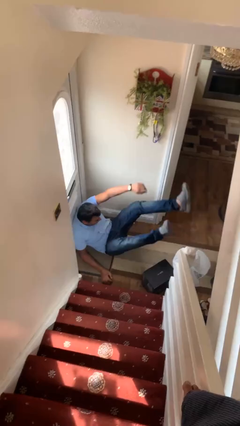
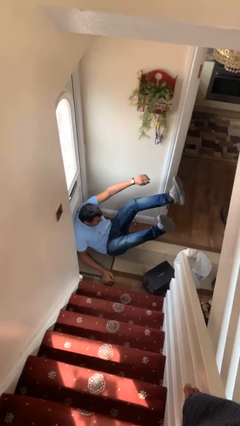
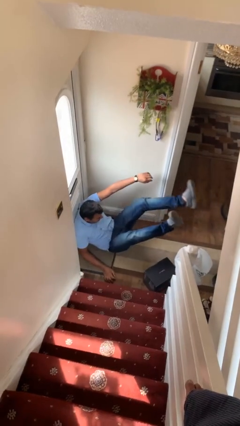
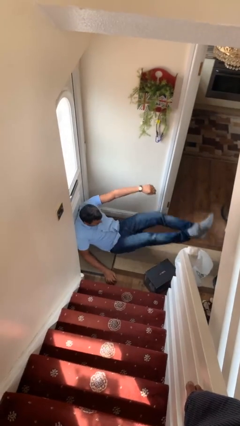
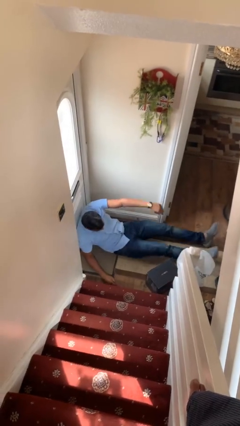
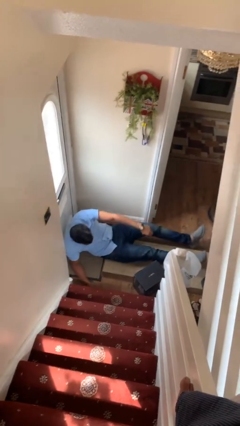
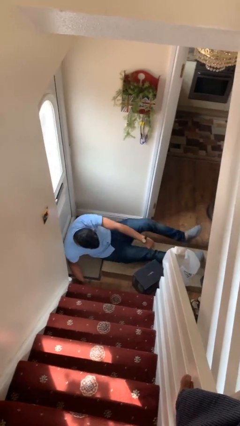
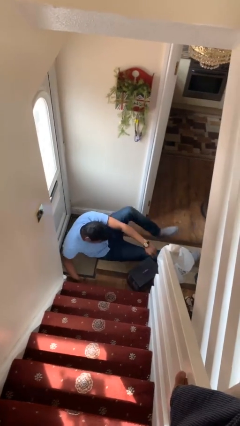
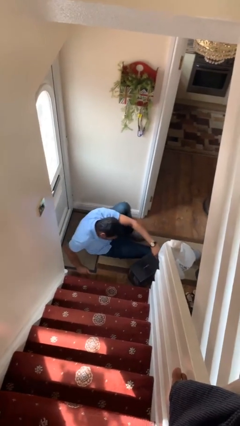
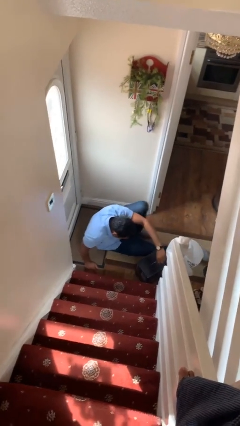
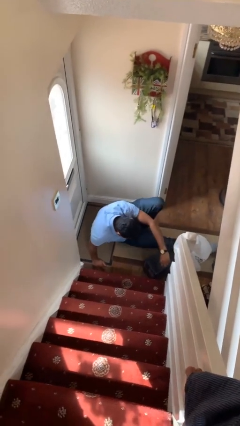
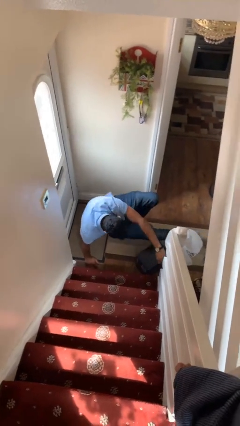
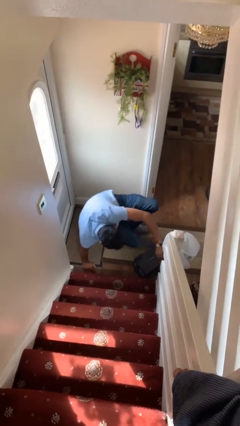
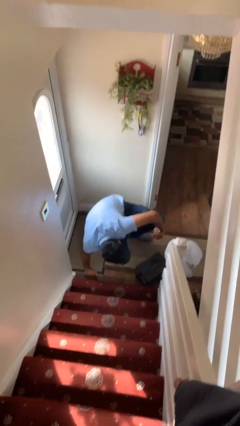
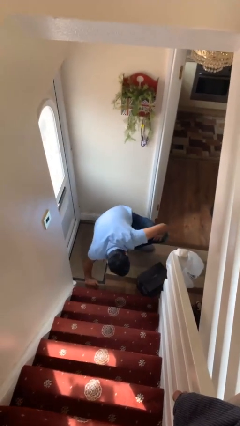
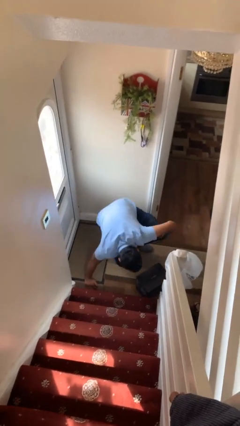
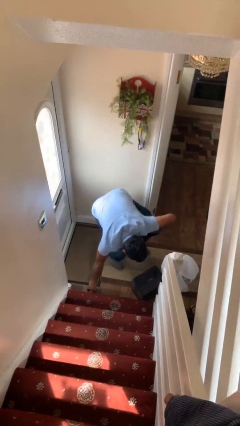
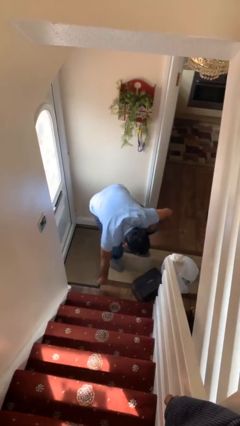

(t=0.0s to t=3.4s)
person lies down on floor

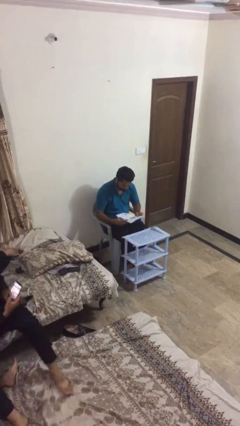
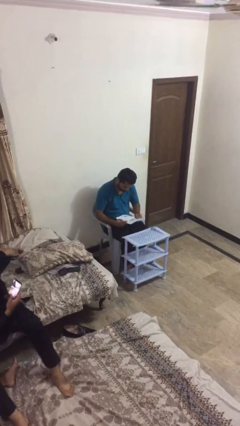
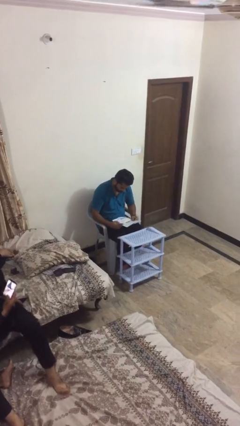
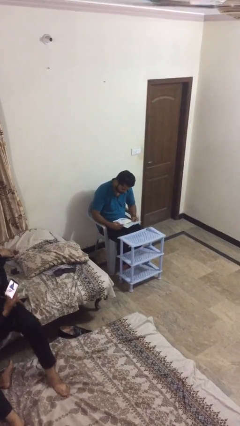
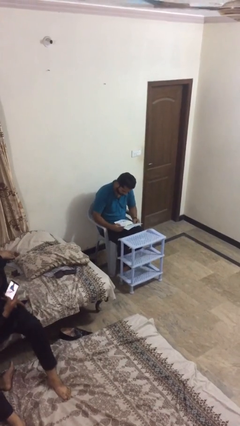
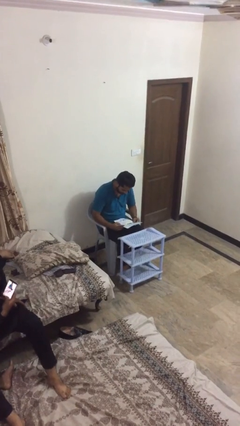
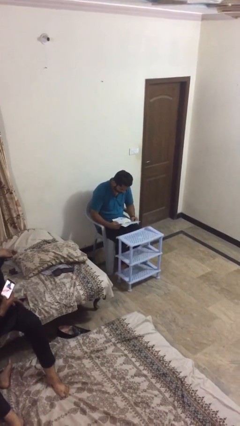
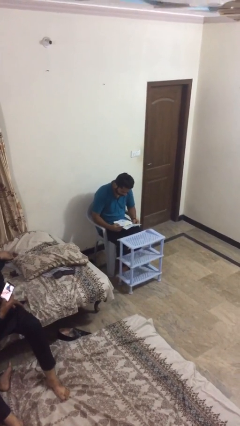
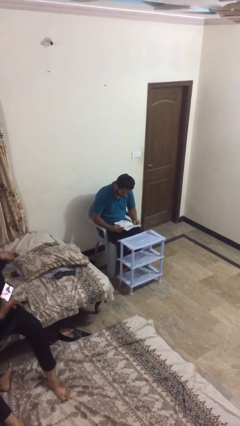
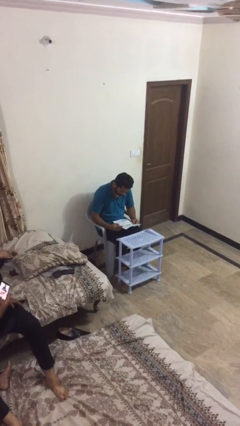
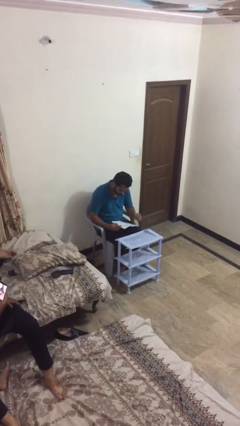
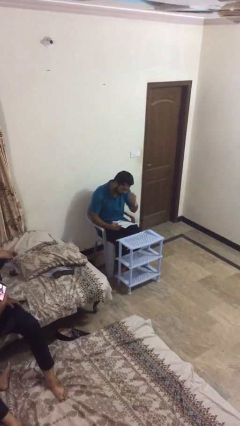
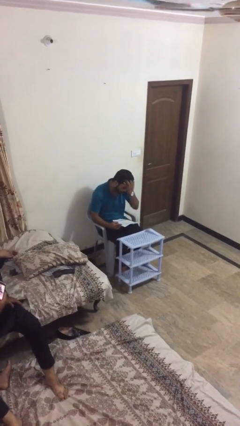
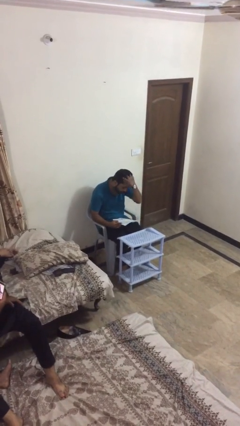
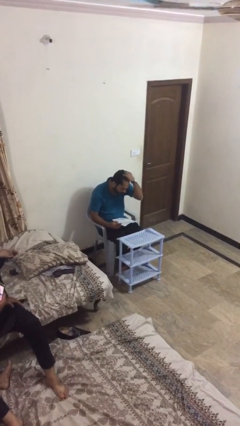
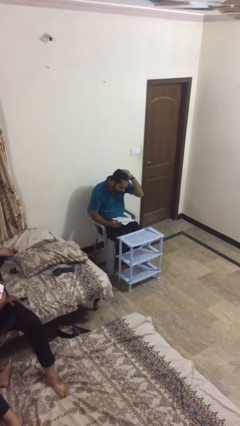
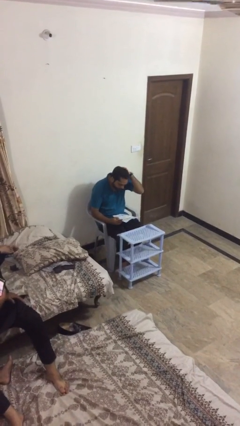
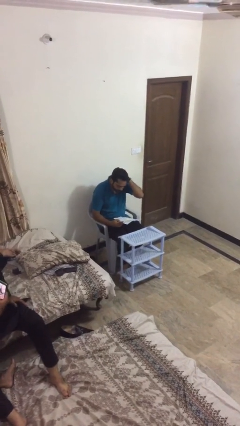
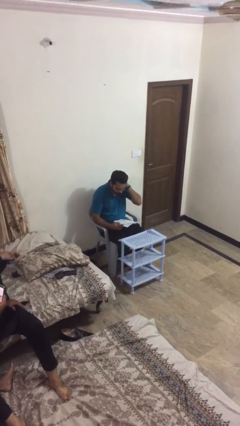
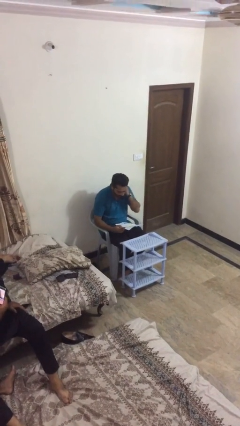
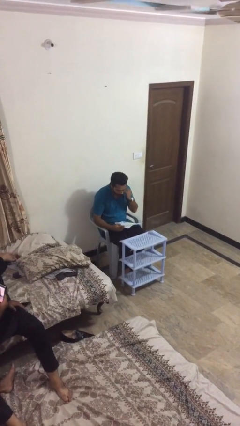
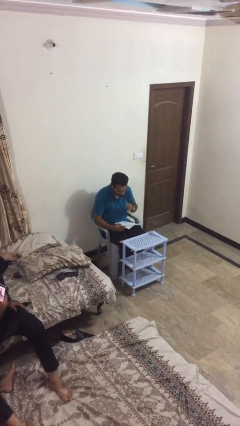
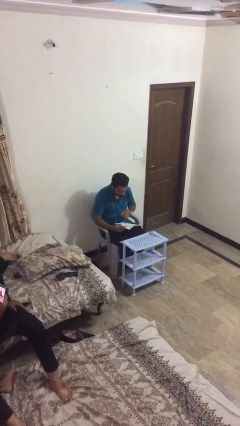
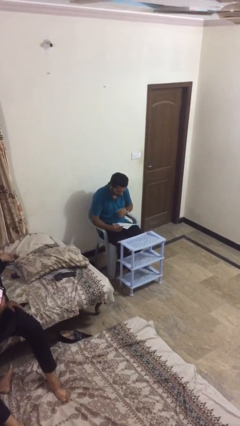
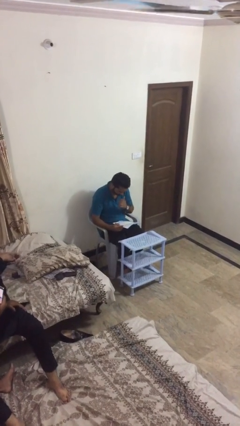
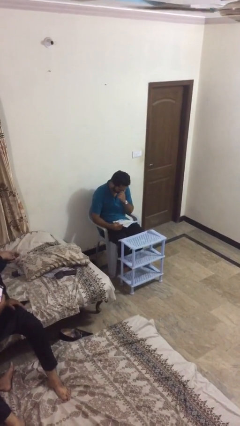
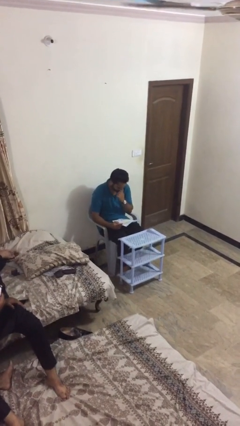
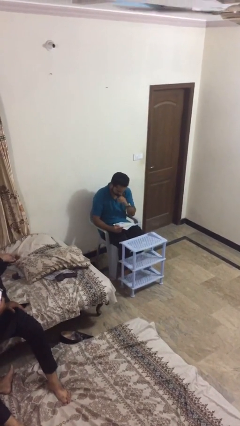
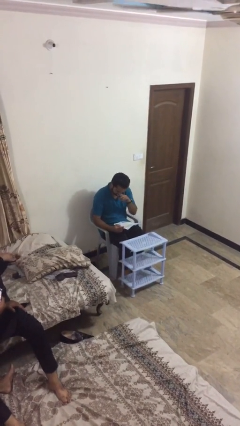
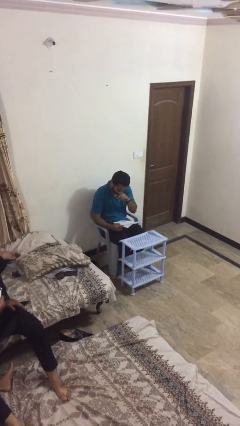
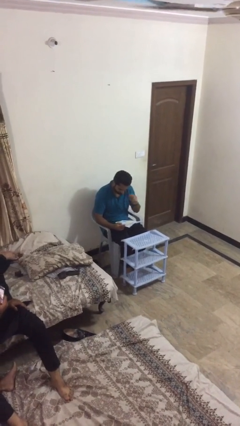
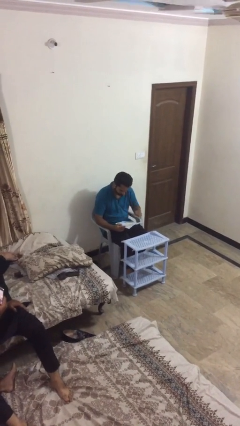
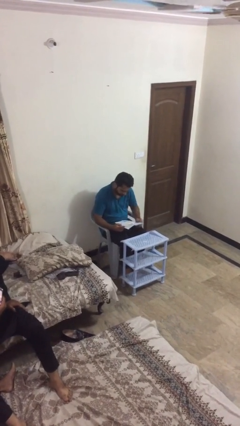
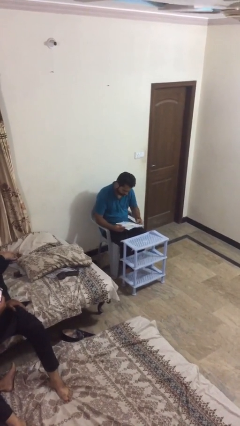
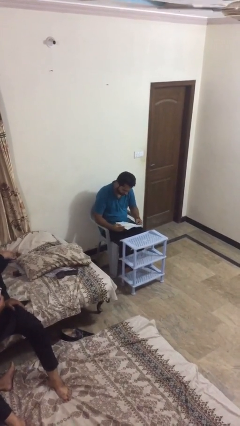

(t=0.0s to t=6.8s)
person reads document

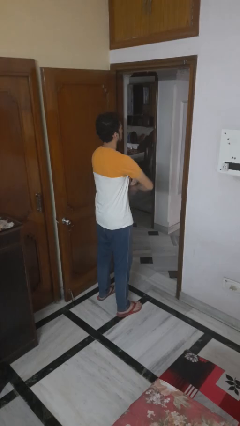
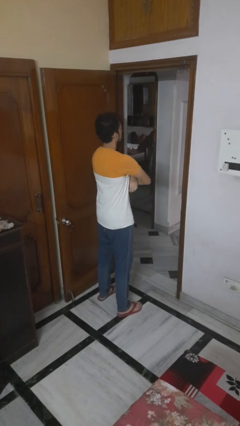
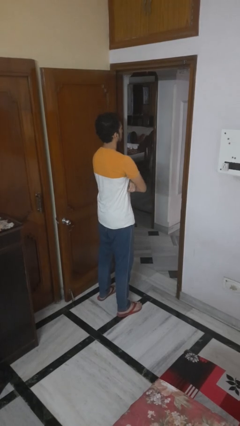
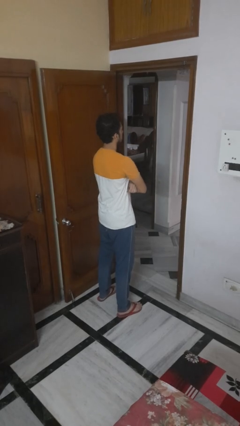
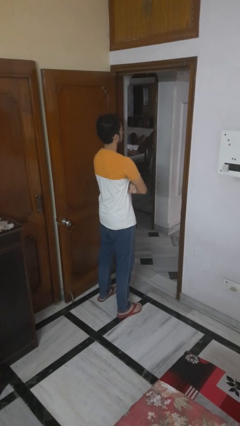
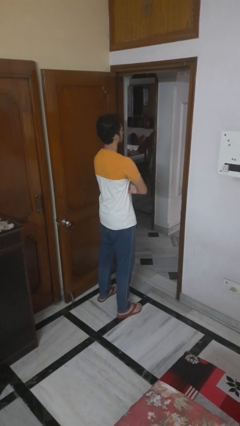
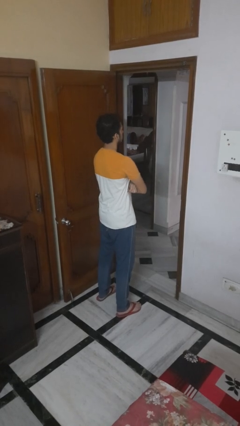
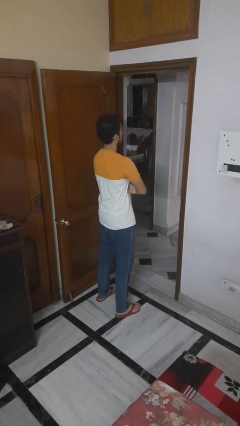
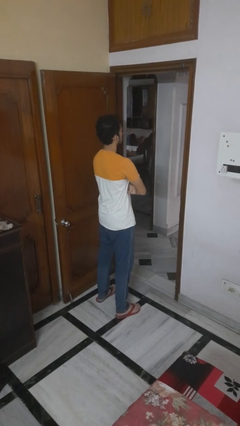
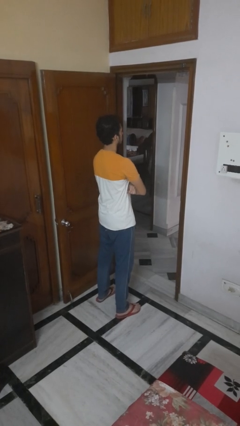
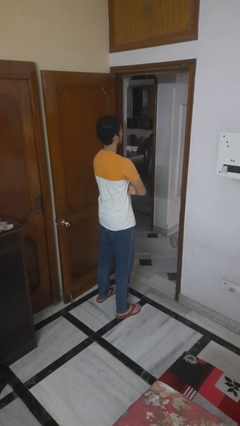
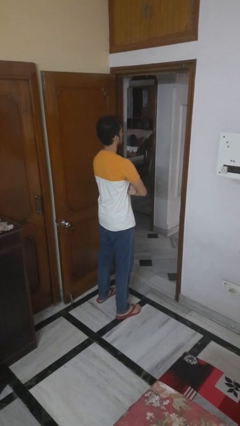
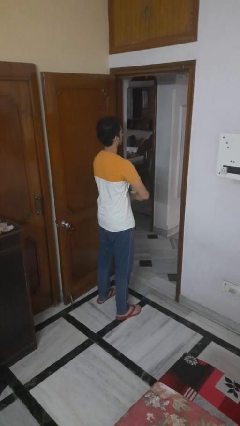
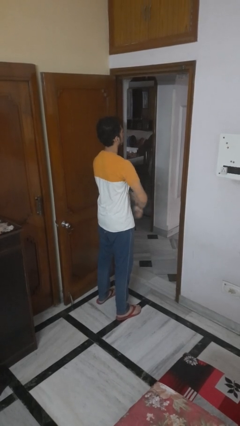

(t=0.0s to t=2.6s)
person crosses arms

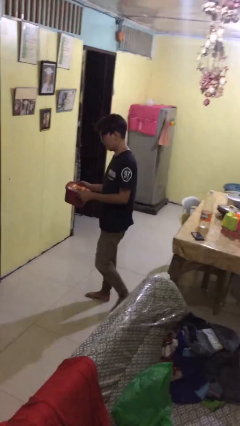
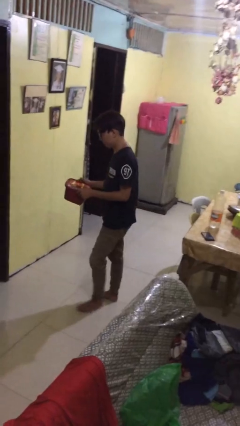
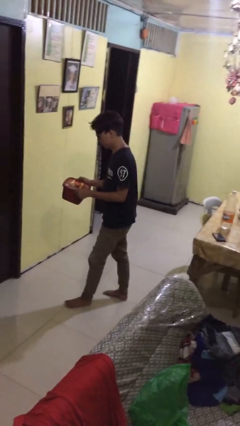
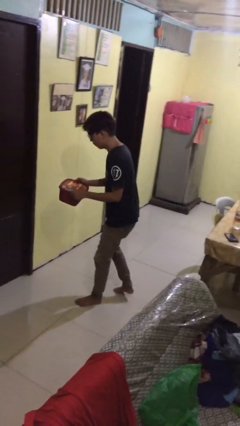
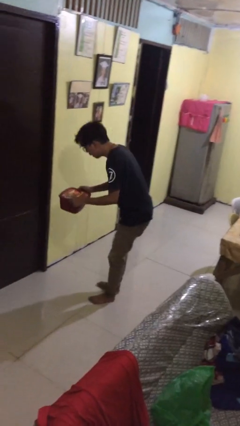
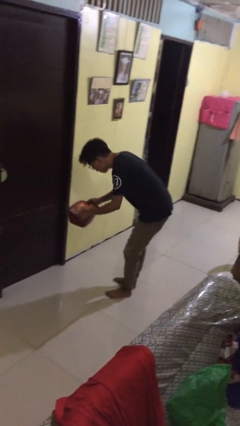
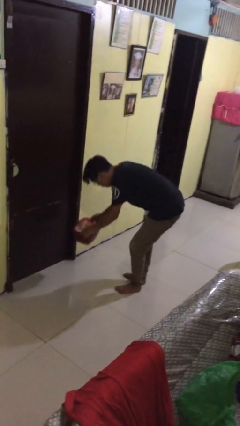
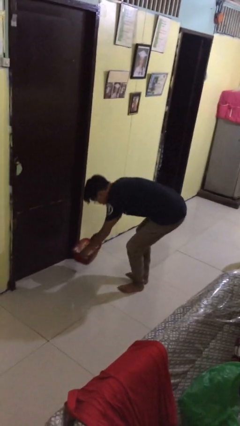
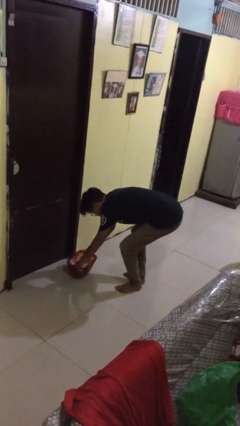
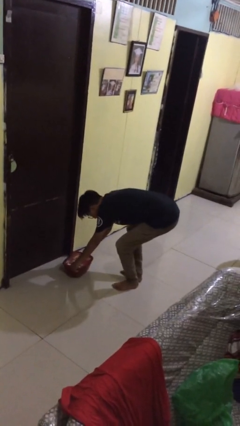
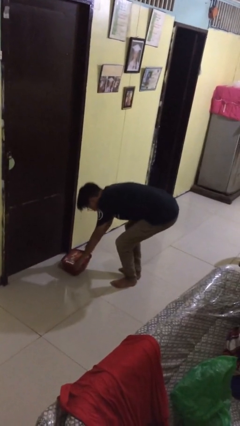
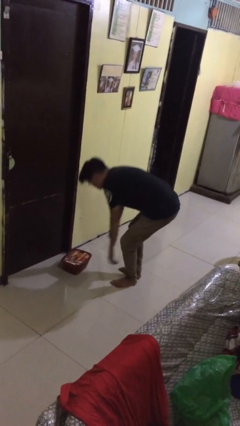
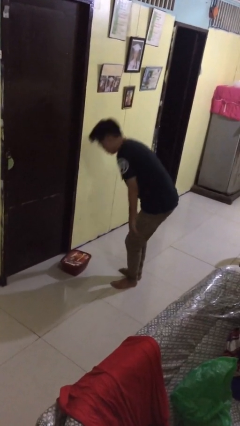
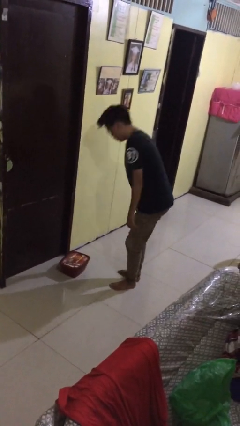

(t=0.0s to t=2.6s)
person puts down object on floor

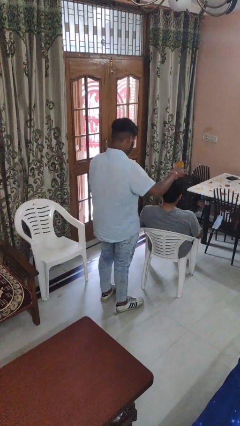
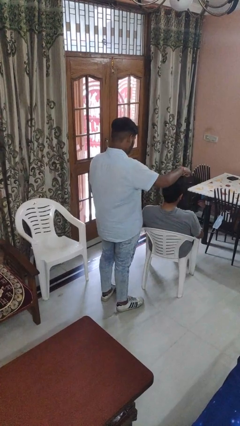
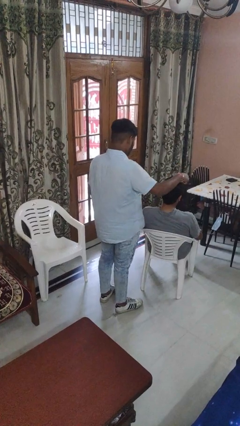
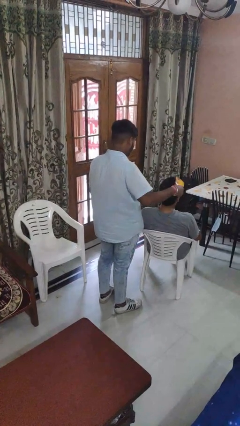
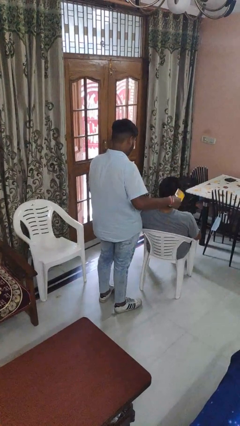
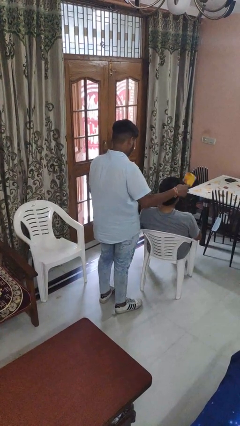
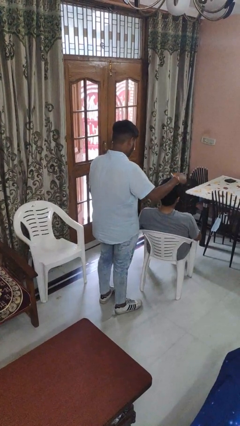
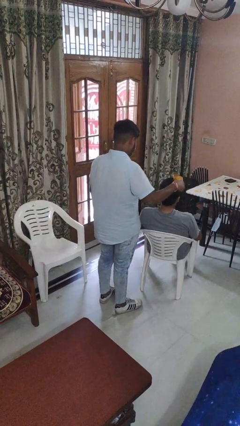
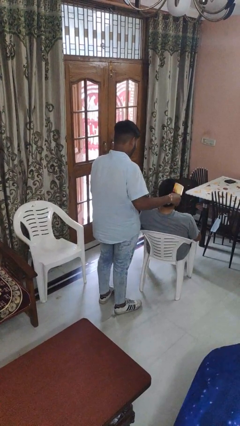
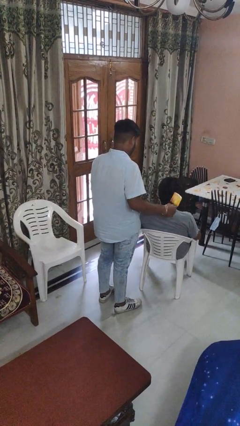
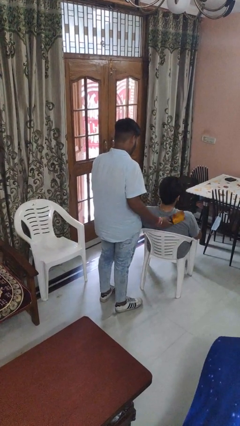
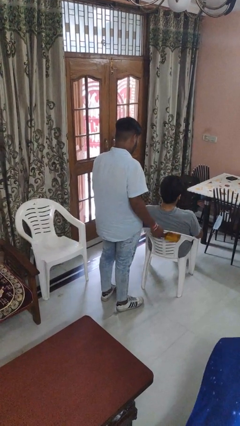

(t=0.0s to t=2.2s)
person brushes hair of person
